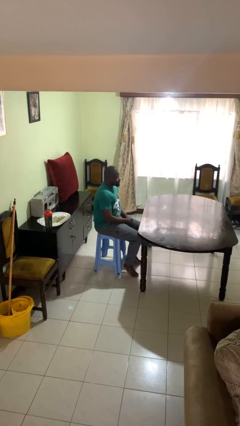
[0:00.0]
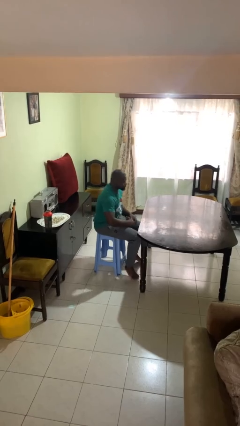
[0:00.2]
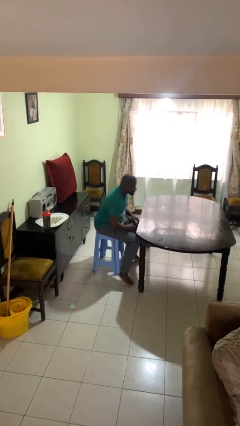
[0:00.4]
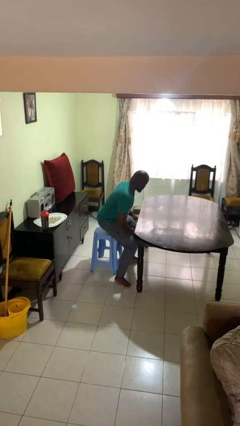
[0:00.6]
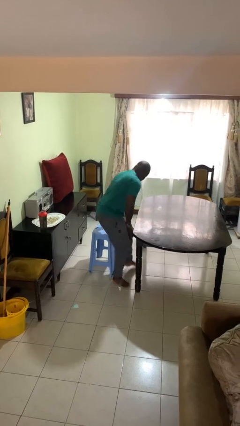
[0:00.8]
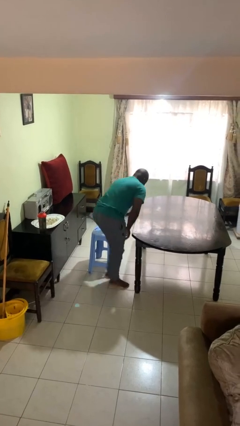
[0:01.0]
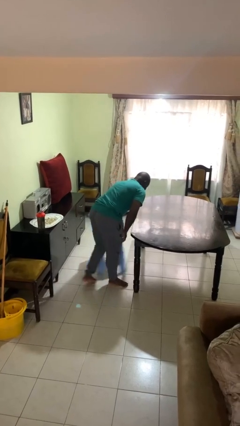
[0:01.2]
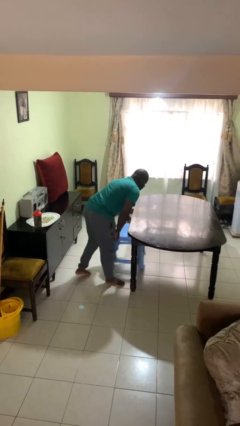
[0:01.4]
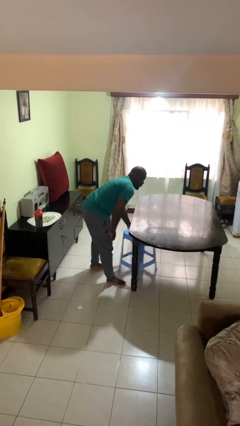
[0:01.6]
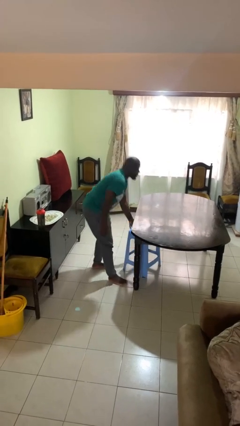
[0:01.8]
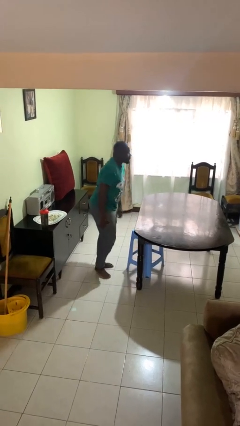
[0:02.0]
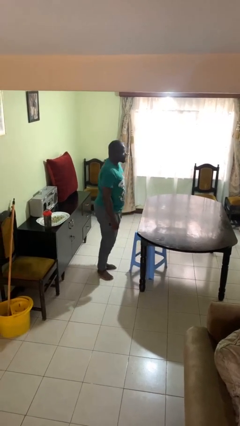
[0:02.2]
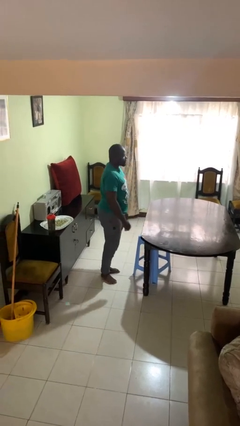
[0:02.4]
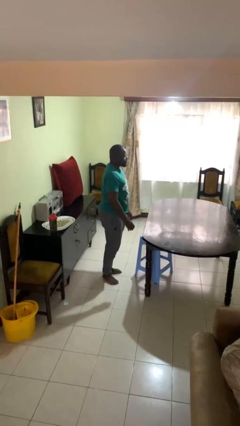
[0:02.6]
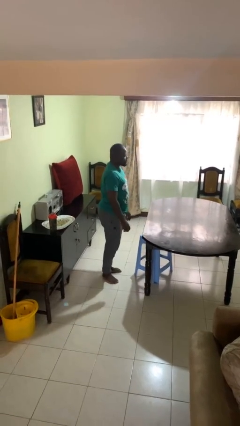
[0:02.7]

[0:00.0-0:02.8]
person stands up

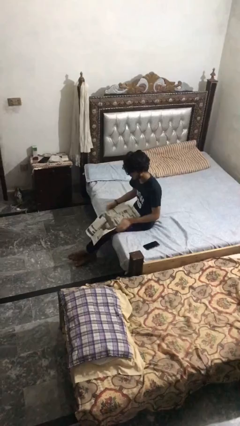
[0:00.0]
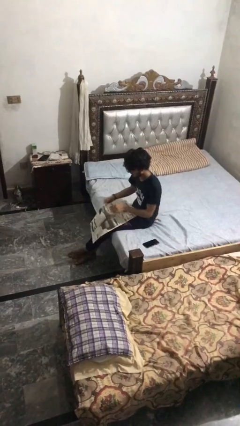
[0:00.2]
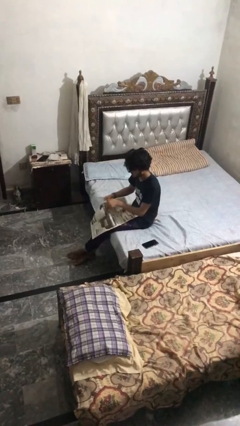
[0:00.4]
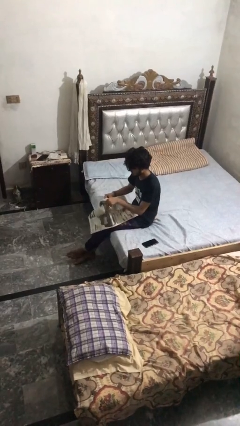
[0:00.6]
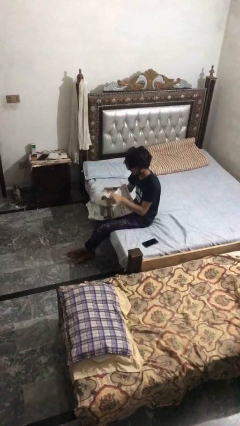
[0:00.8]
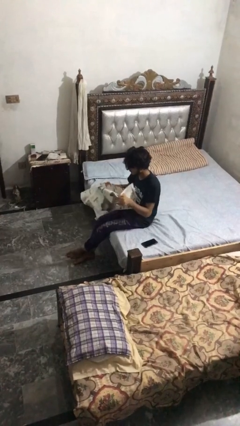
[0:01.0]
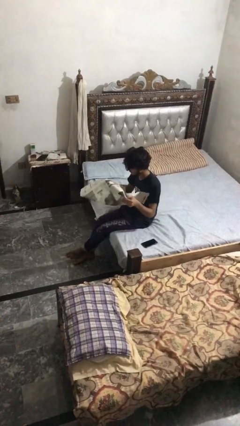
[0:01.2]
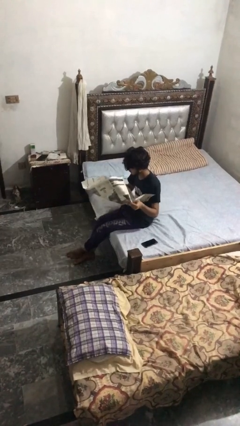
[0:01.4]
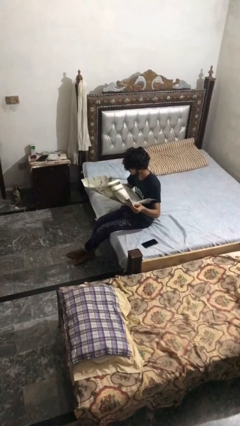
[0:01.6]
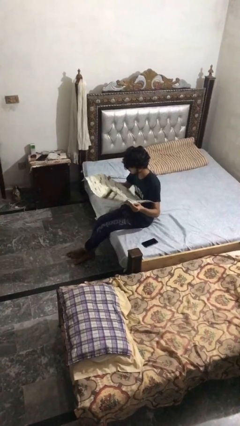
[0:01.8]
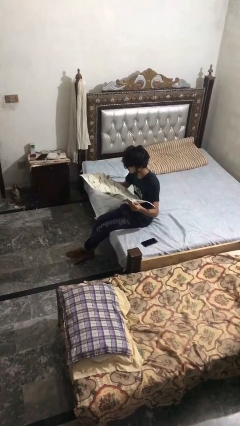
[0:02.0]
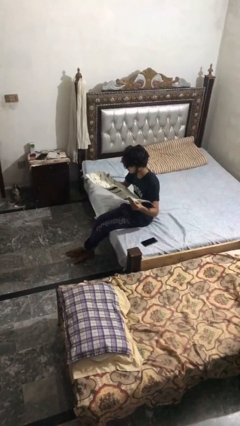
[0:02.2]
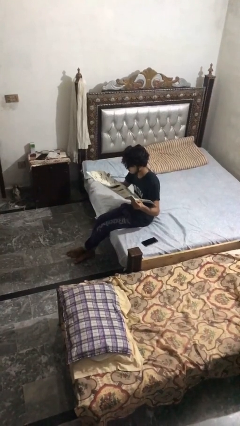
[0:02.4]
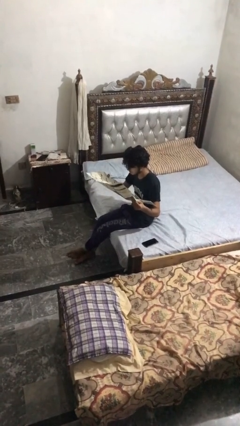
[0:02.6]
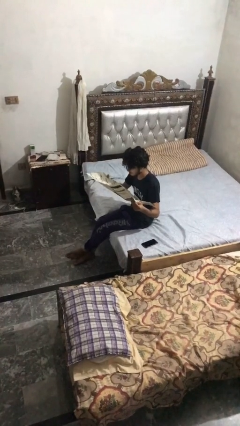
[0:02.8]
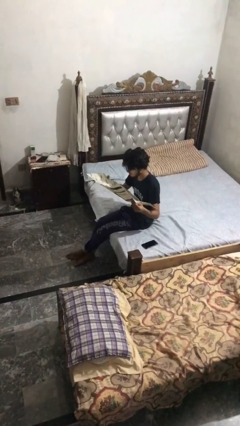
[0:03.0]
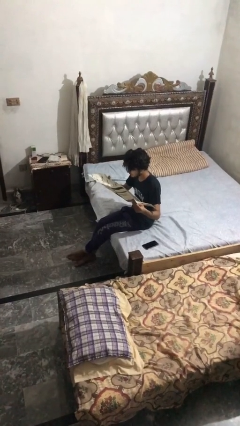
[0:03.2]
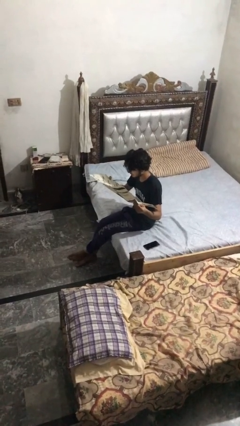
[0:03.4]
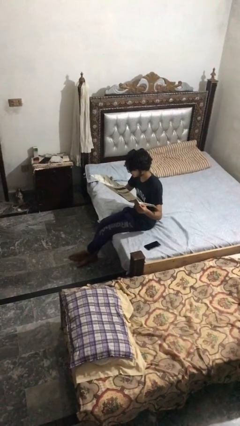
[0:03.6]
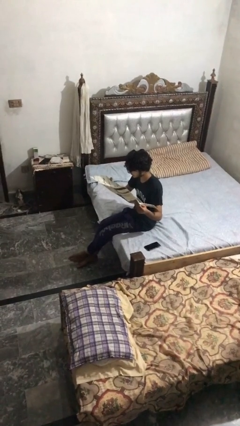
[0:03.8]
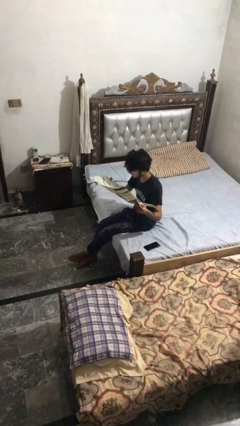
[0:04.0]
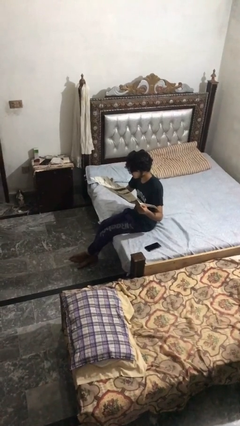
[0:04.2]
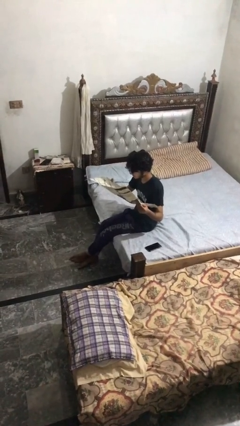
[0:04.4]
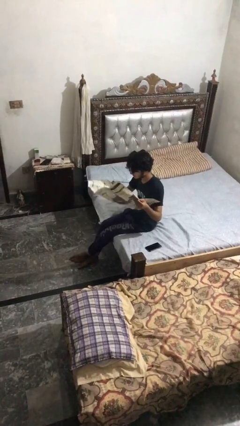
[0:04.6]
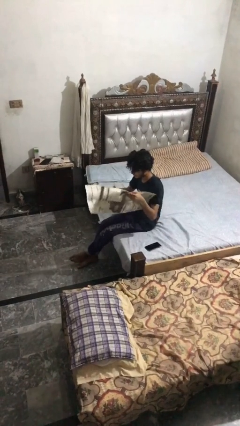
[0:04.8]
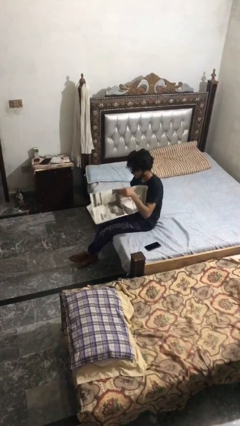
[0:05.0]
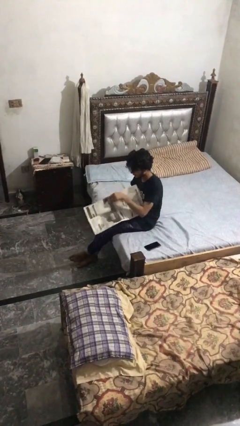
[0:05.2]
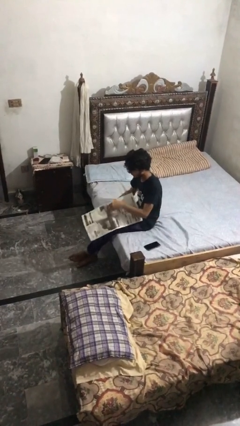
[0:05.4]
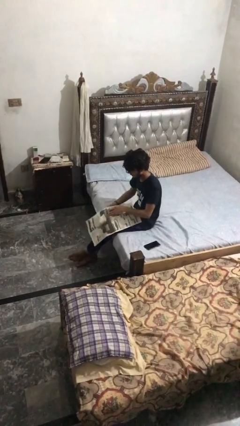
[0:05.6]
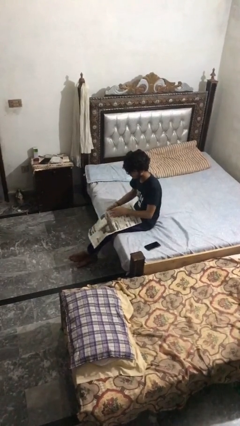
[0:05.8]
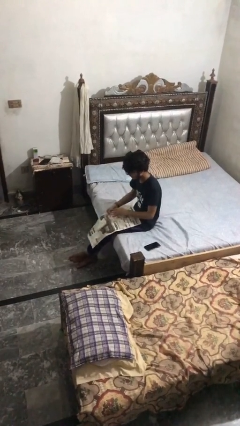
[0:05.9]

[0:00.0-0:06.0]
person reads newspaper

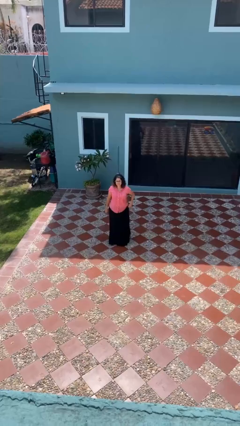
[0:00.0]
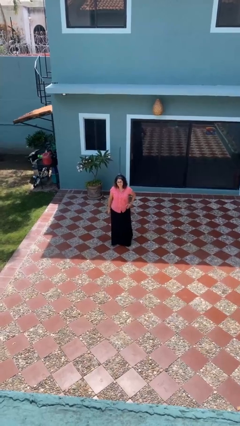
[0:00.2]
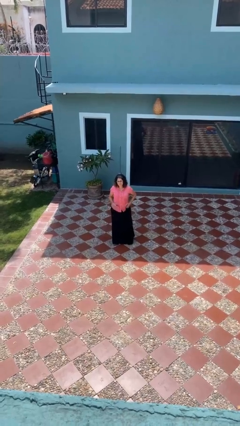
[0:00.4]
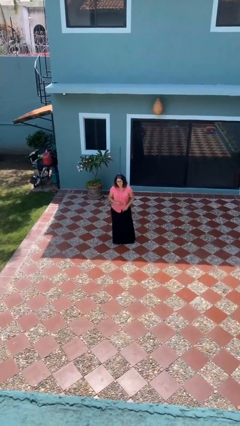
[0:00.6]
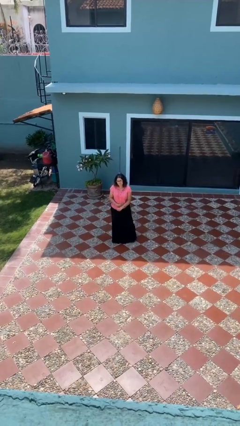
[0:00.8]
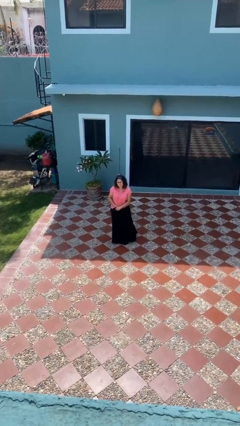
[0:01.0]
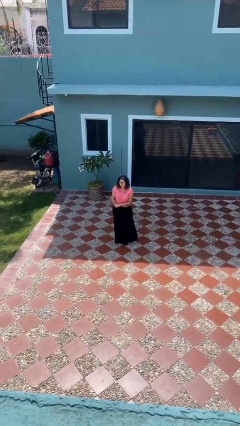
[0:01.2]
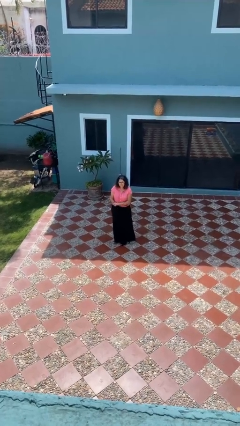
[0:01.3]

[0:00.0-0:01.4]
person tucks in shirt

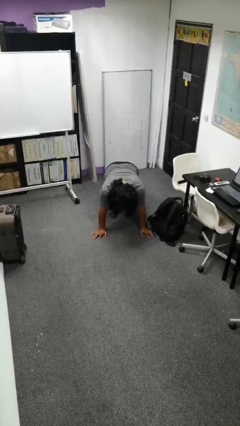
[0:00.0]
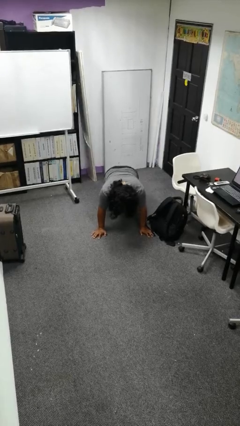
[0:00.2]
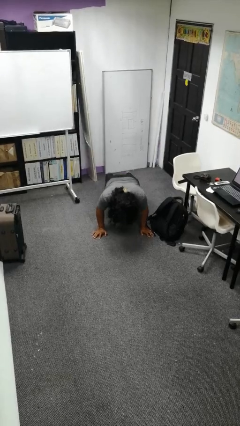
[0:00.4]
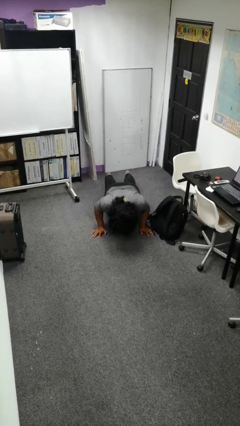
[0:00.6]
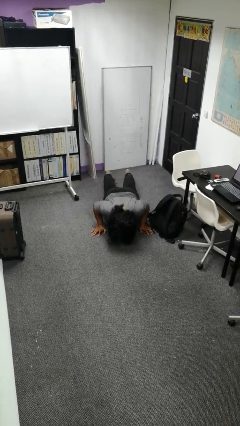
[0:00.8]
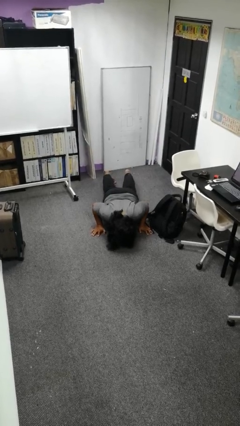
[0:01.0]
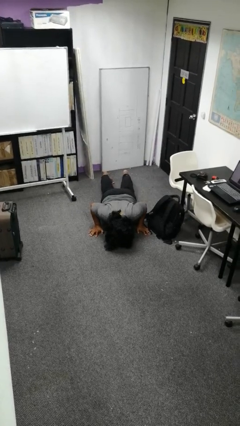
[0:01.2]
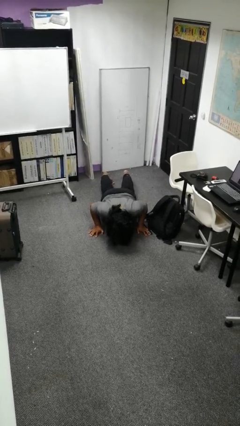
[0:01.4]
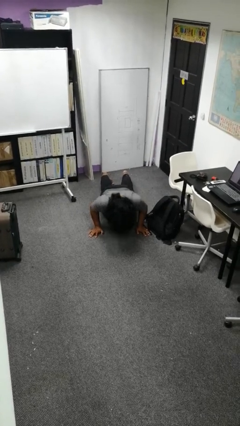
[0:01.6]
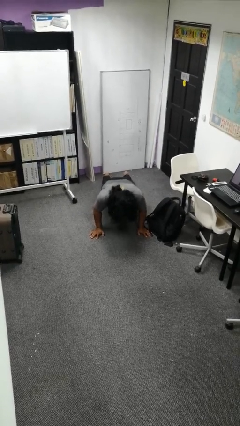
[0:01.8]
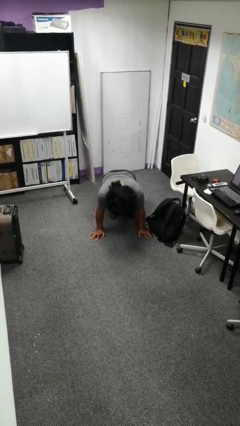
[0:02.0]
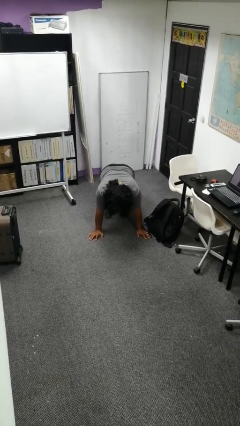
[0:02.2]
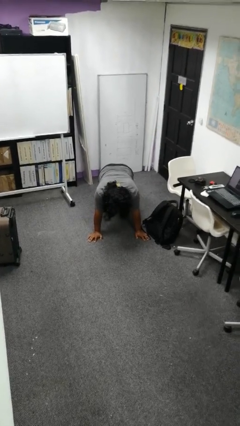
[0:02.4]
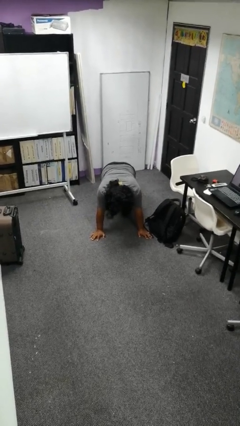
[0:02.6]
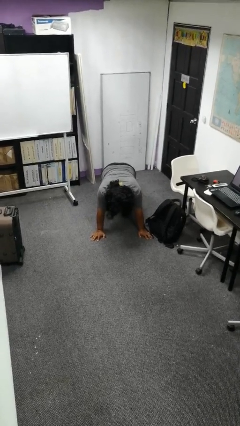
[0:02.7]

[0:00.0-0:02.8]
person exercises with pushup

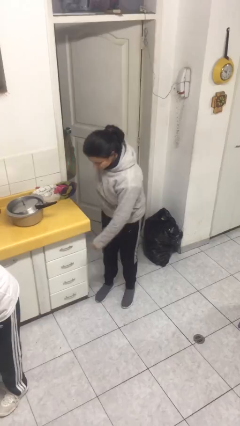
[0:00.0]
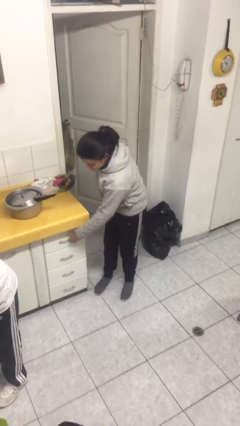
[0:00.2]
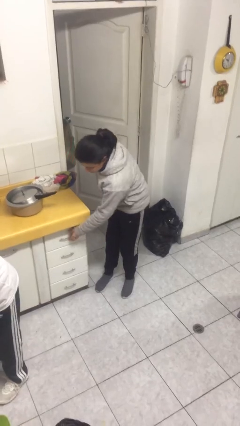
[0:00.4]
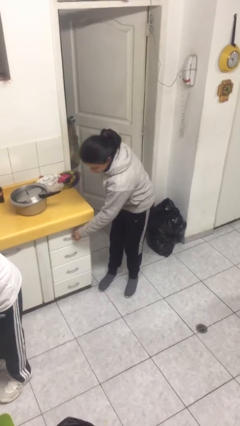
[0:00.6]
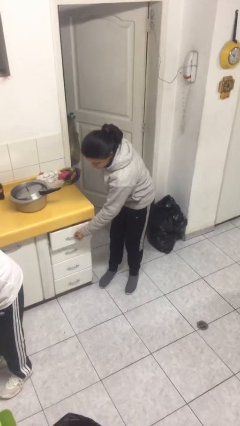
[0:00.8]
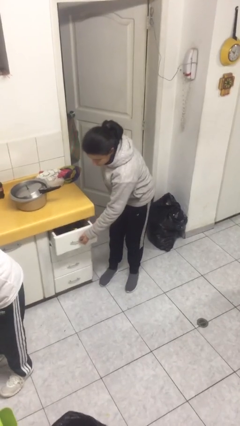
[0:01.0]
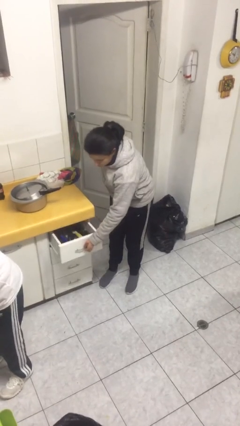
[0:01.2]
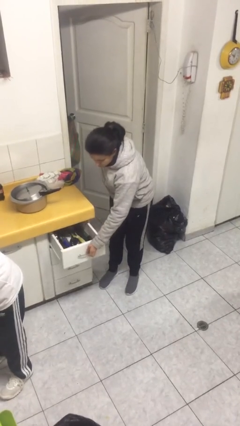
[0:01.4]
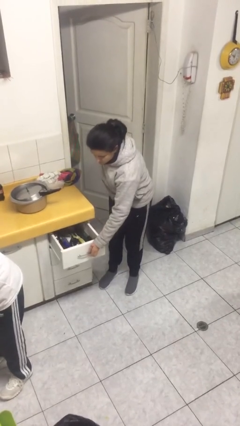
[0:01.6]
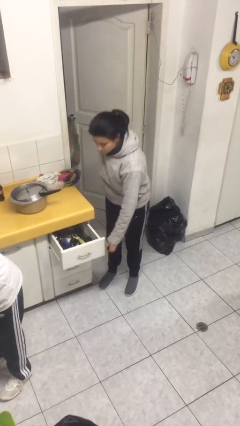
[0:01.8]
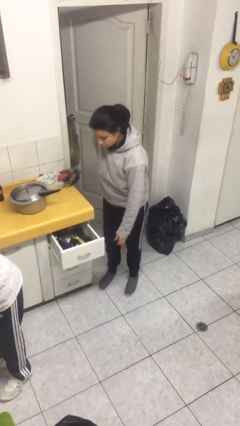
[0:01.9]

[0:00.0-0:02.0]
person opens kitchen drawer

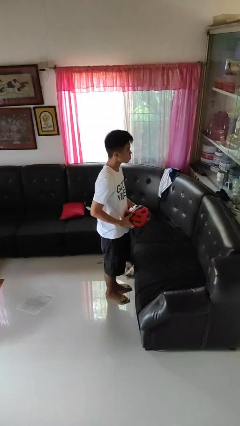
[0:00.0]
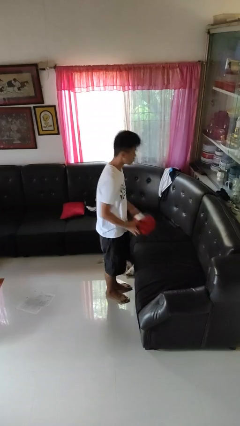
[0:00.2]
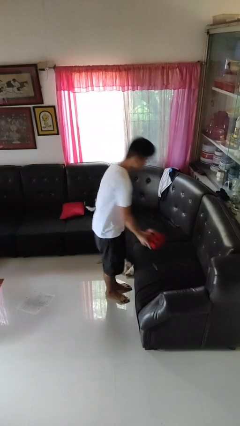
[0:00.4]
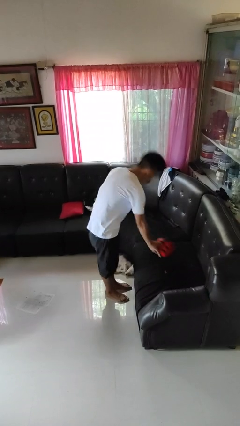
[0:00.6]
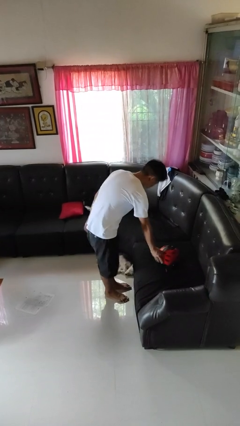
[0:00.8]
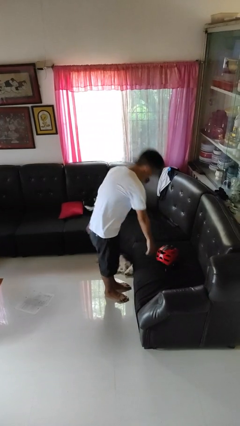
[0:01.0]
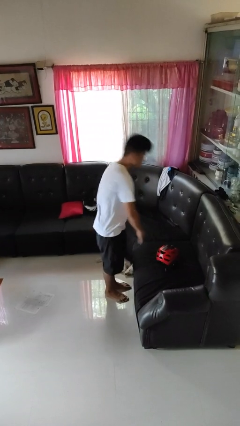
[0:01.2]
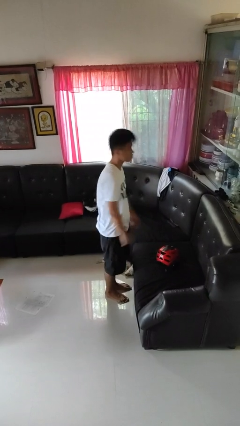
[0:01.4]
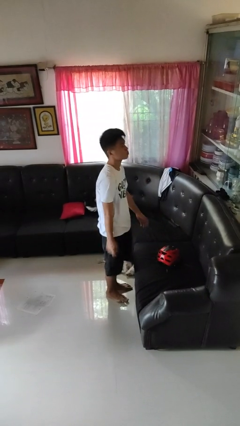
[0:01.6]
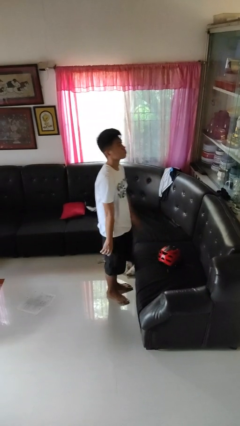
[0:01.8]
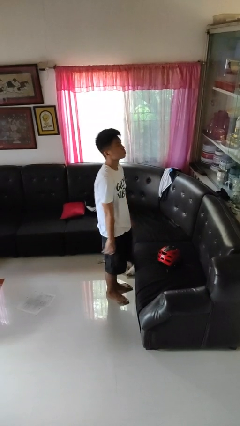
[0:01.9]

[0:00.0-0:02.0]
person puts down object on couch

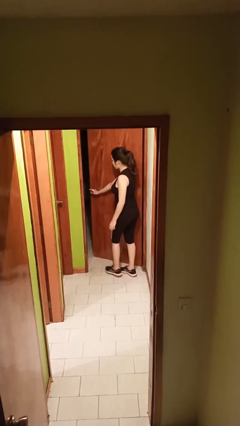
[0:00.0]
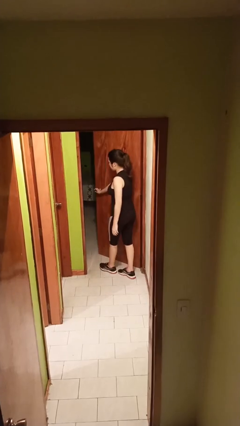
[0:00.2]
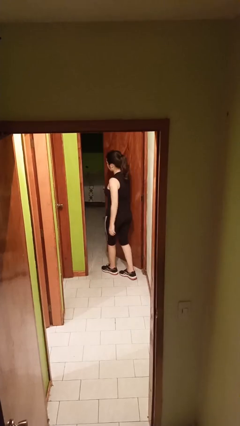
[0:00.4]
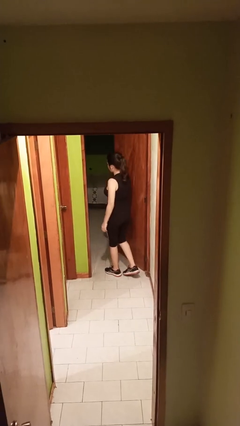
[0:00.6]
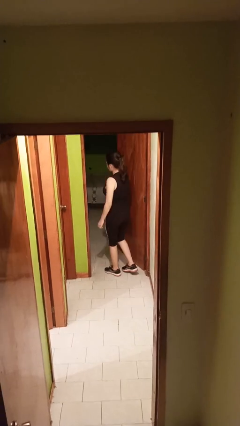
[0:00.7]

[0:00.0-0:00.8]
person opens facility door
